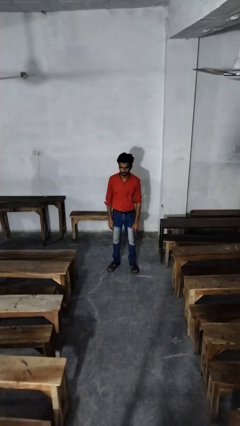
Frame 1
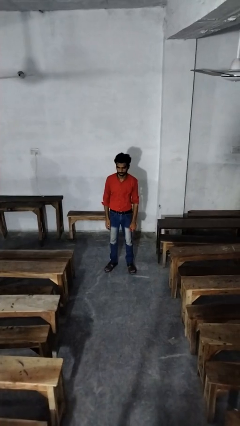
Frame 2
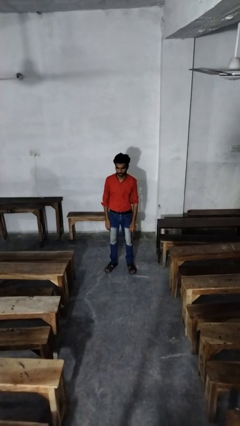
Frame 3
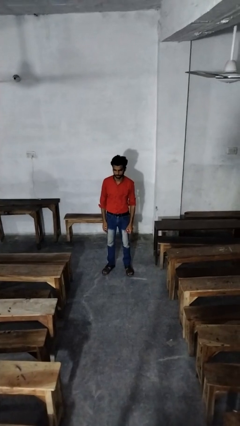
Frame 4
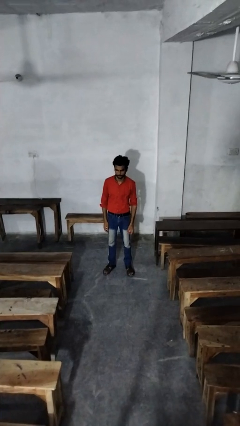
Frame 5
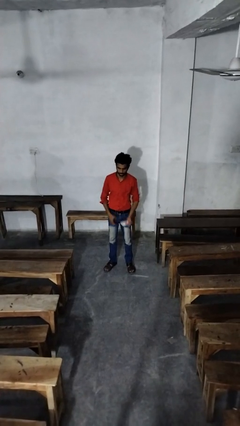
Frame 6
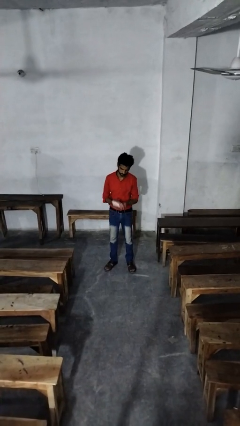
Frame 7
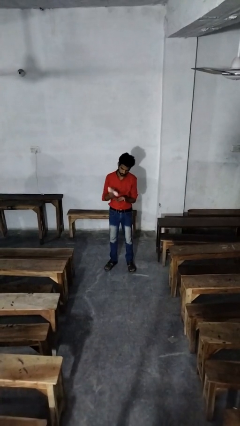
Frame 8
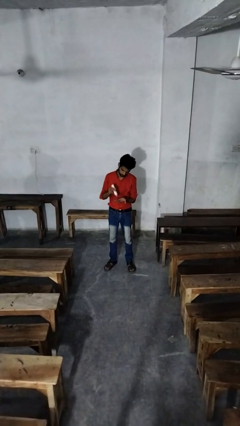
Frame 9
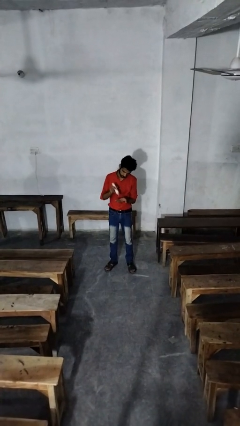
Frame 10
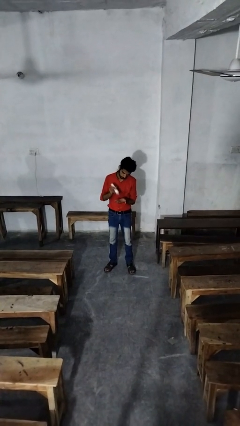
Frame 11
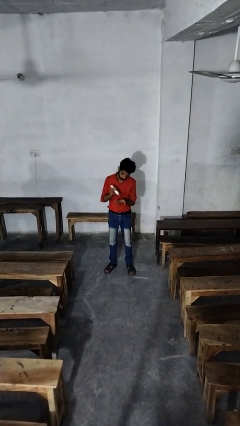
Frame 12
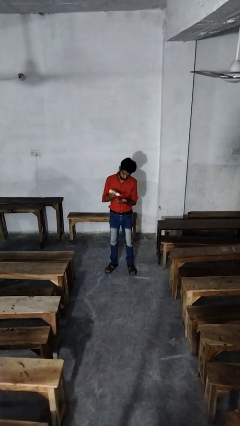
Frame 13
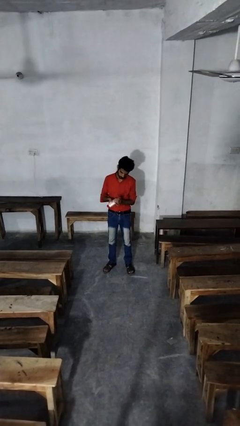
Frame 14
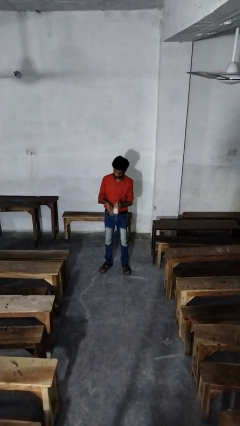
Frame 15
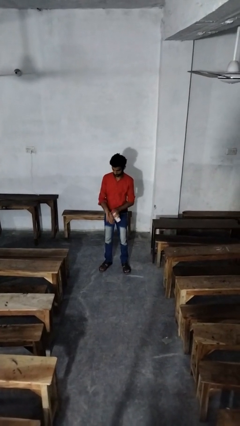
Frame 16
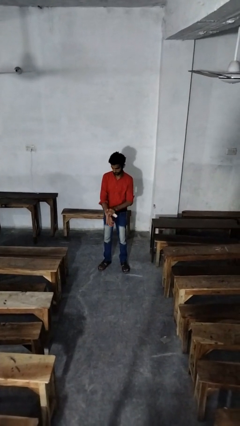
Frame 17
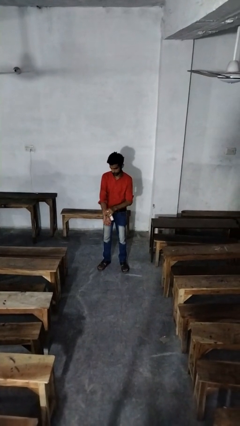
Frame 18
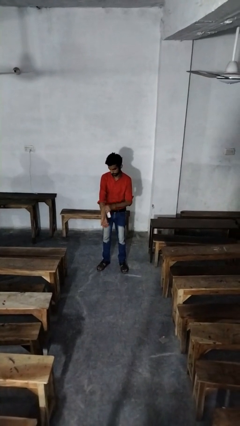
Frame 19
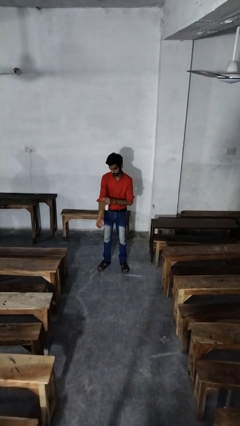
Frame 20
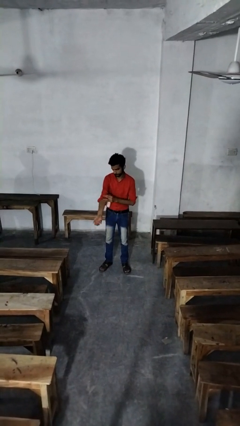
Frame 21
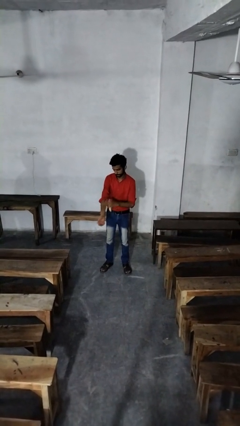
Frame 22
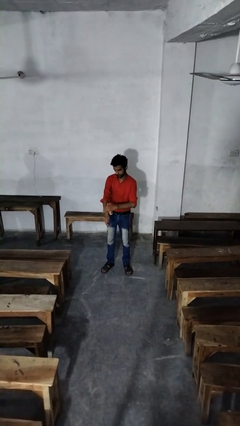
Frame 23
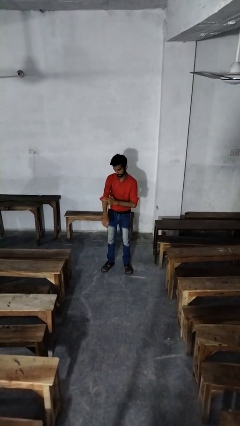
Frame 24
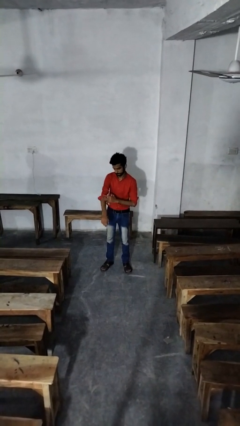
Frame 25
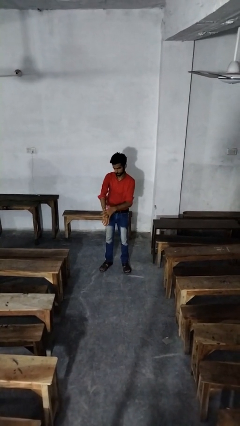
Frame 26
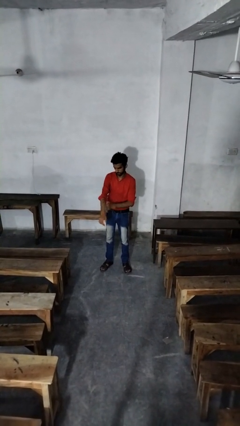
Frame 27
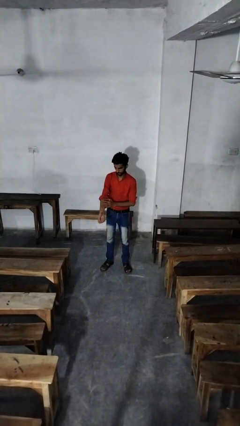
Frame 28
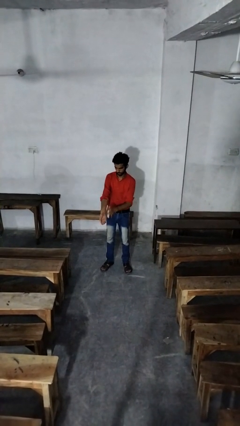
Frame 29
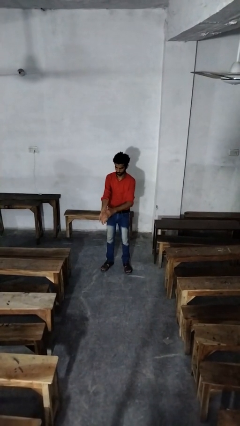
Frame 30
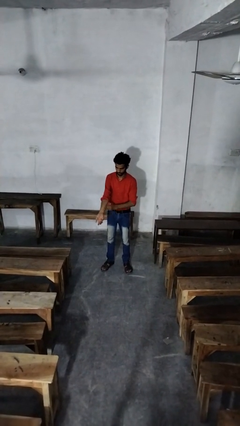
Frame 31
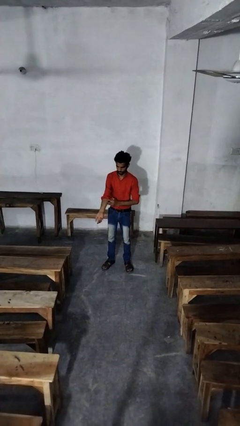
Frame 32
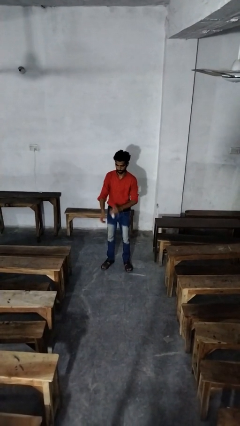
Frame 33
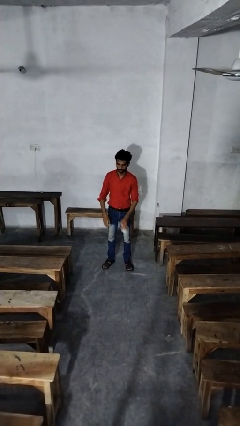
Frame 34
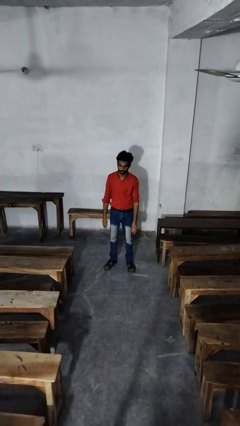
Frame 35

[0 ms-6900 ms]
person applies sunscreen

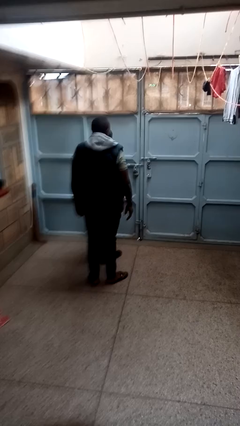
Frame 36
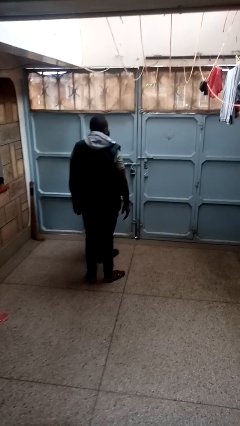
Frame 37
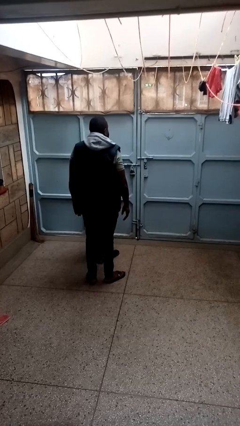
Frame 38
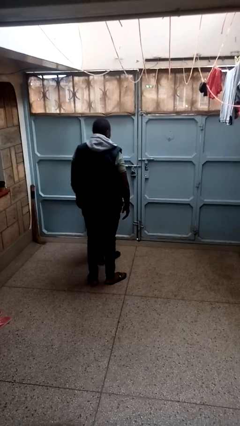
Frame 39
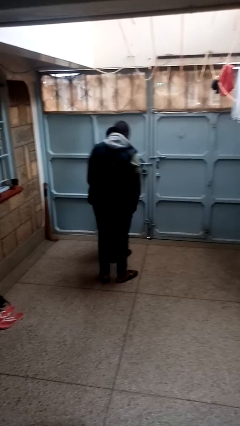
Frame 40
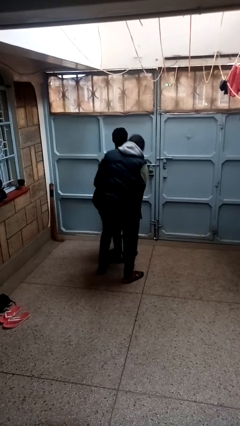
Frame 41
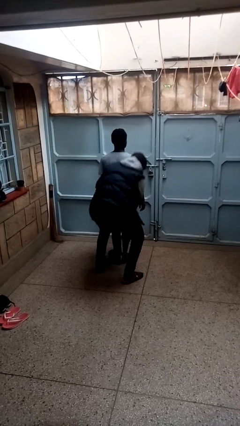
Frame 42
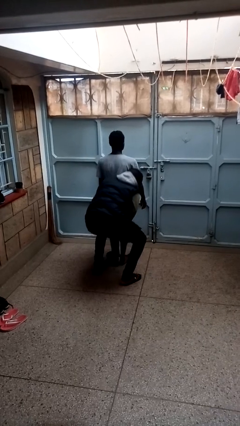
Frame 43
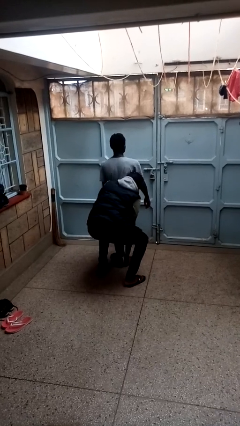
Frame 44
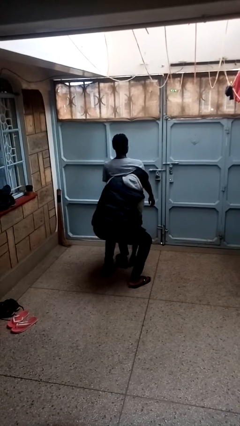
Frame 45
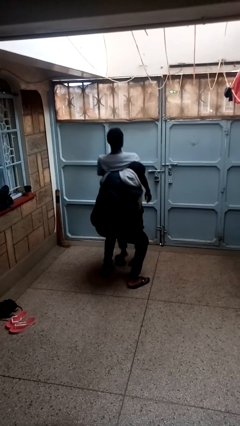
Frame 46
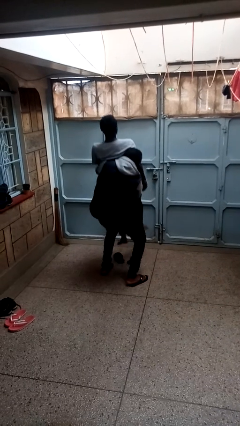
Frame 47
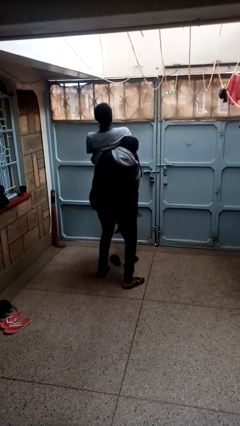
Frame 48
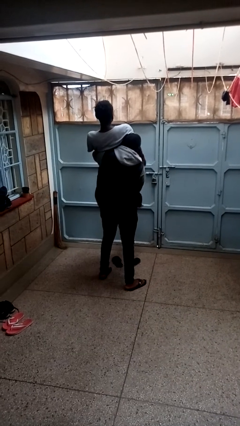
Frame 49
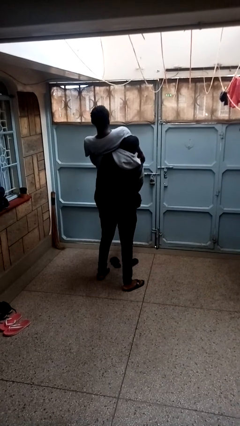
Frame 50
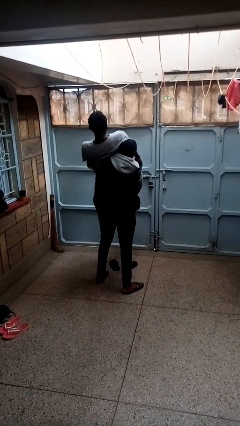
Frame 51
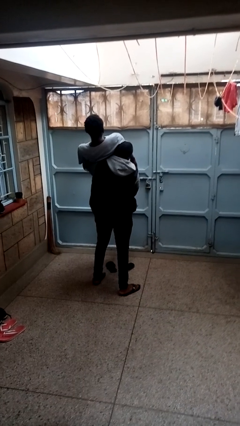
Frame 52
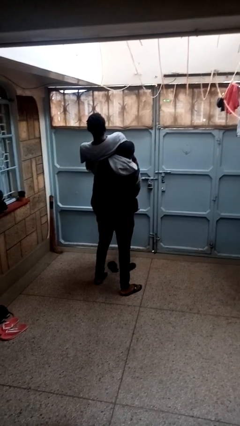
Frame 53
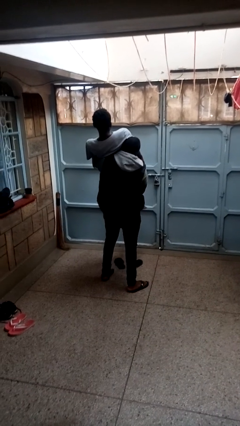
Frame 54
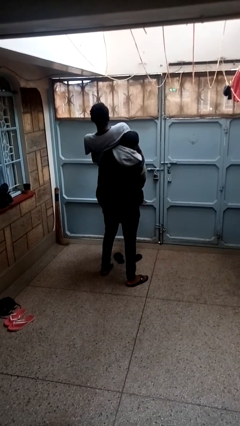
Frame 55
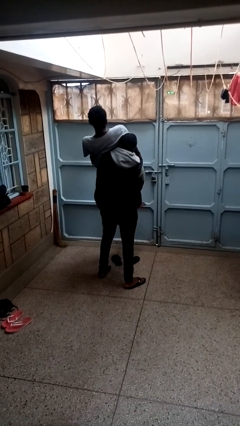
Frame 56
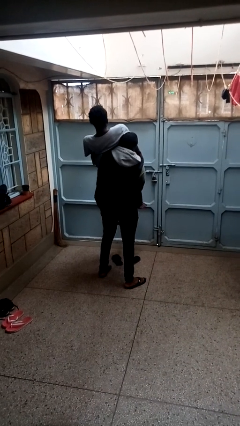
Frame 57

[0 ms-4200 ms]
person carries person over shoulder

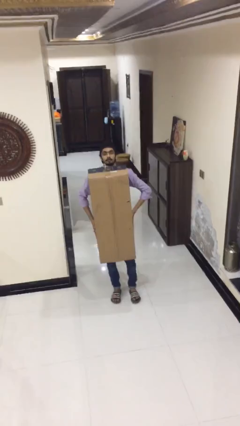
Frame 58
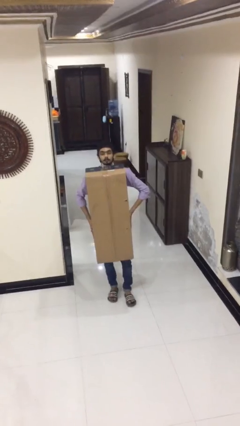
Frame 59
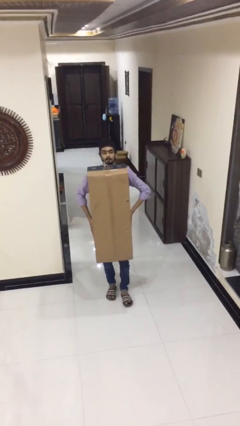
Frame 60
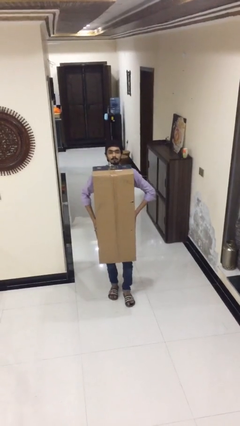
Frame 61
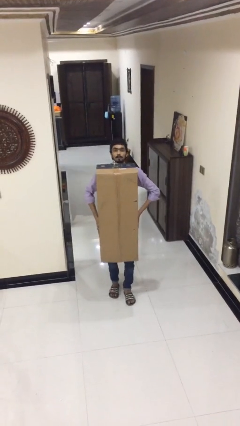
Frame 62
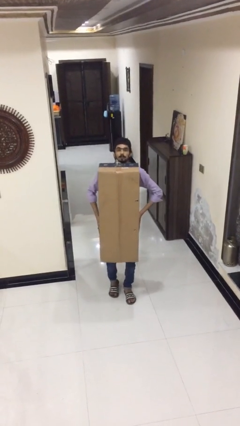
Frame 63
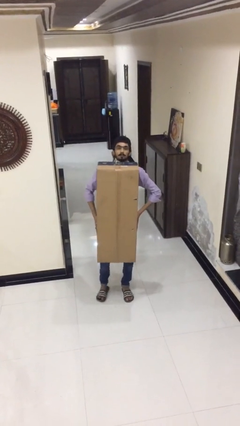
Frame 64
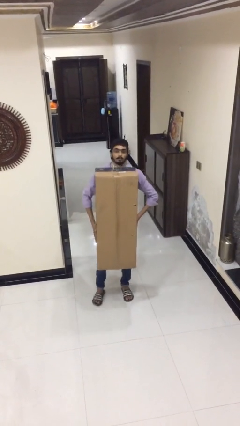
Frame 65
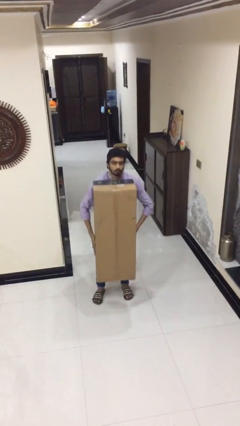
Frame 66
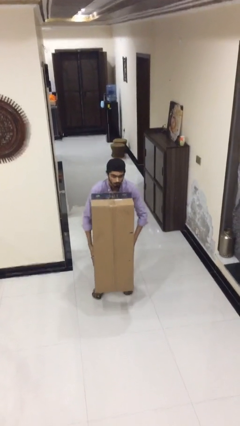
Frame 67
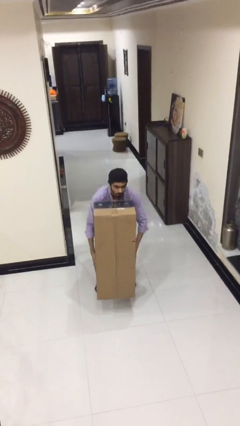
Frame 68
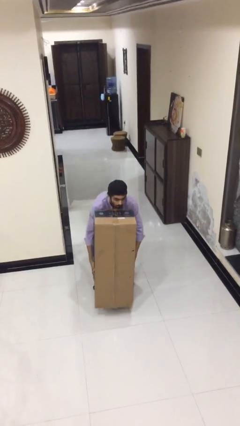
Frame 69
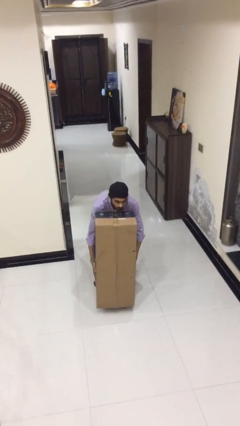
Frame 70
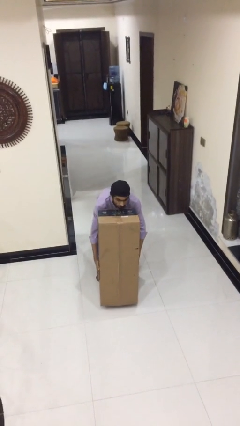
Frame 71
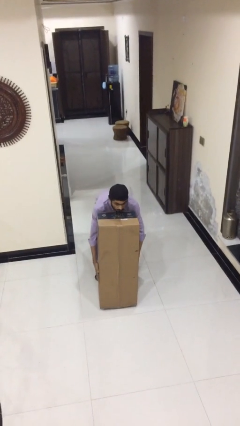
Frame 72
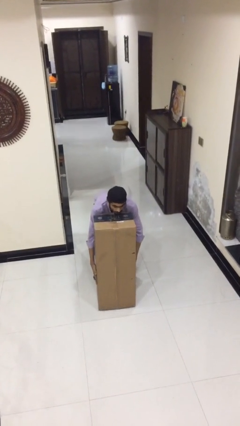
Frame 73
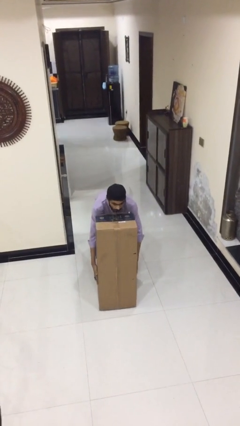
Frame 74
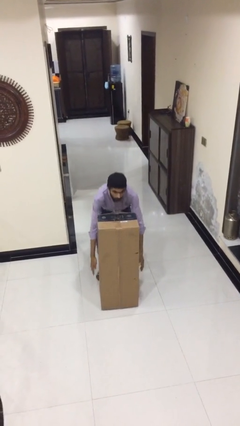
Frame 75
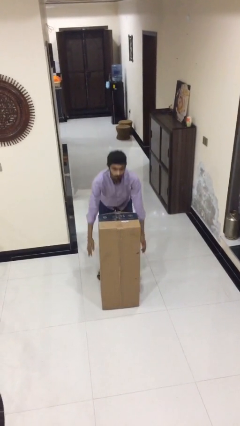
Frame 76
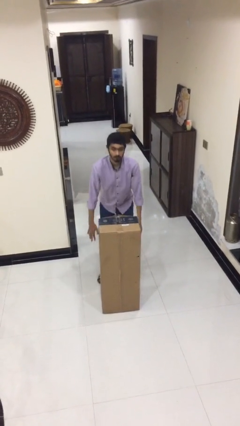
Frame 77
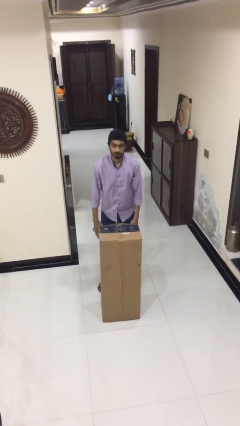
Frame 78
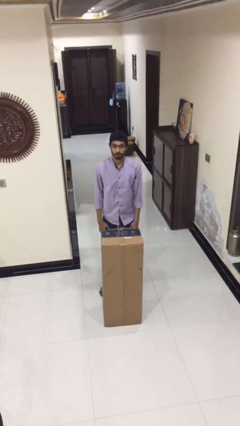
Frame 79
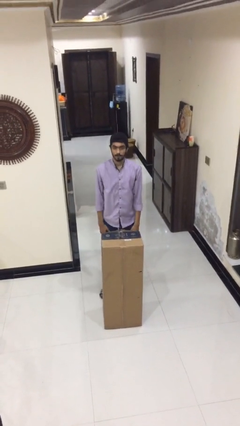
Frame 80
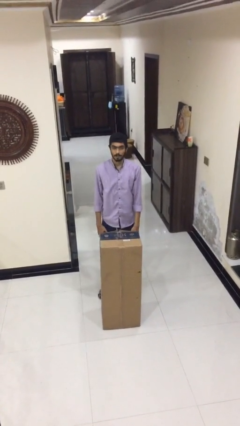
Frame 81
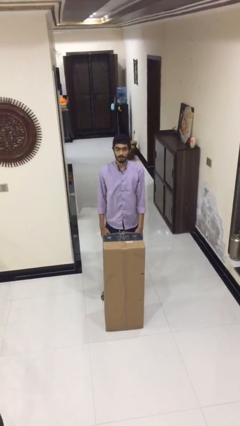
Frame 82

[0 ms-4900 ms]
person puts down object on floor

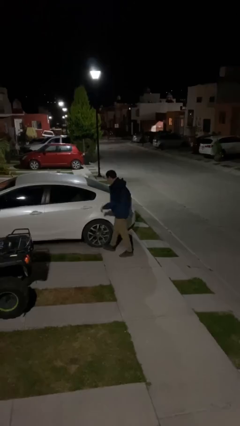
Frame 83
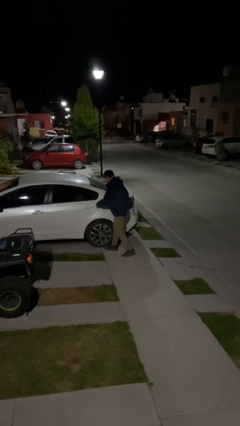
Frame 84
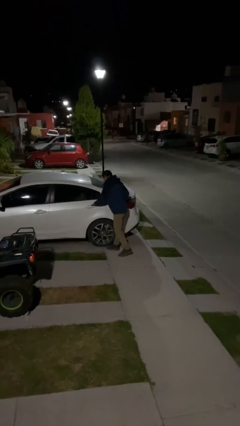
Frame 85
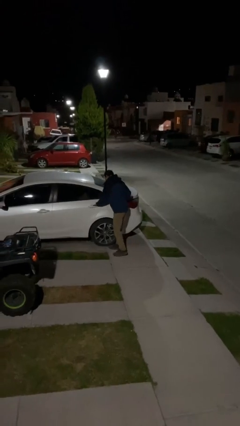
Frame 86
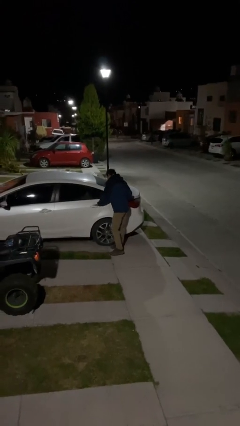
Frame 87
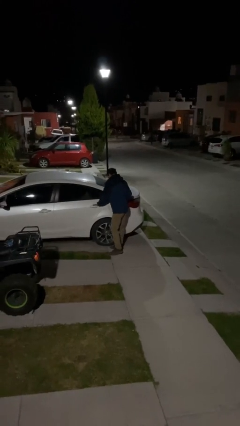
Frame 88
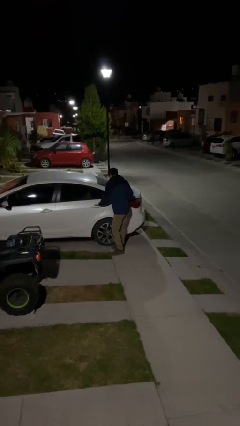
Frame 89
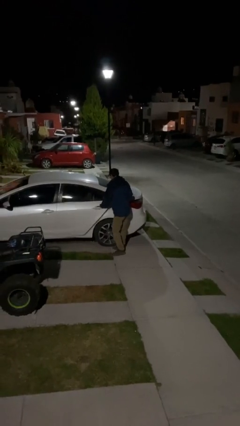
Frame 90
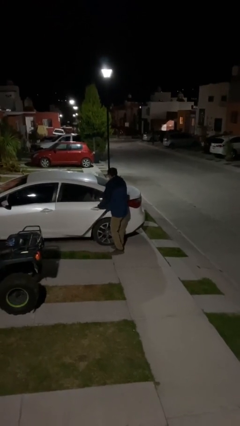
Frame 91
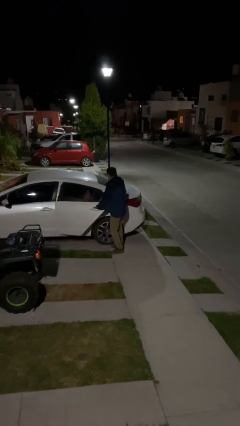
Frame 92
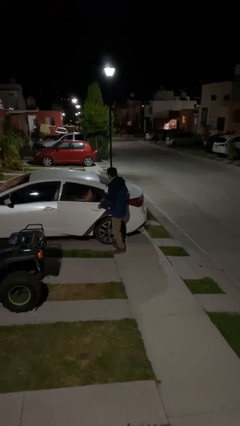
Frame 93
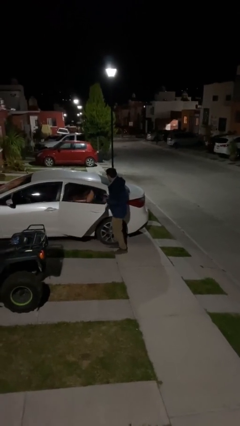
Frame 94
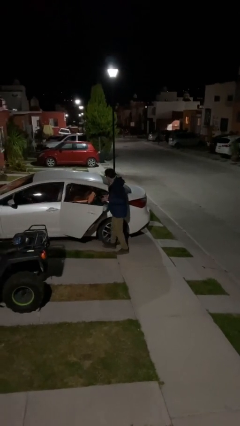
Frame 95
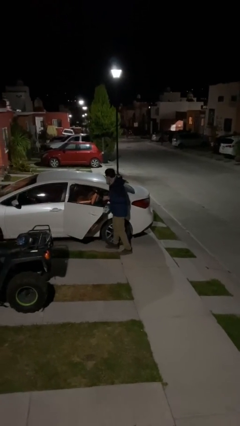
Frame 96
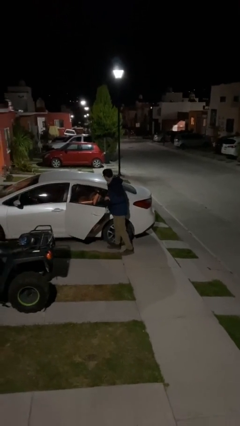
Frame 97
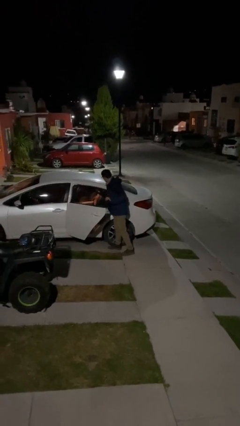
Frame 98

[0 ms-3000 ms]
person opens car door
